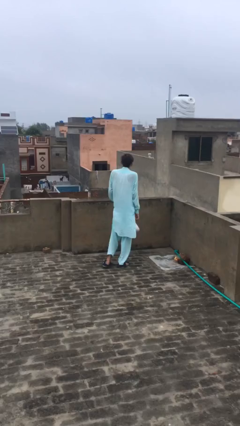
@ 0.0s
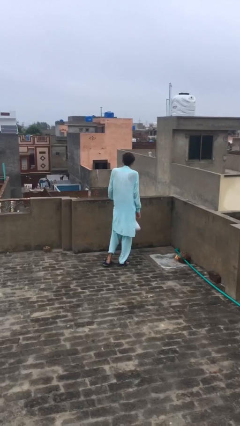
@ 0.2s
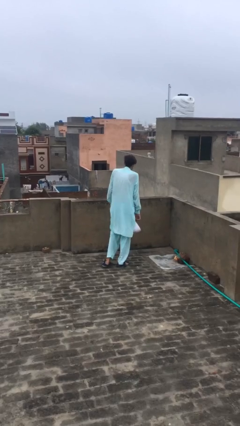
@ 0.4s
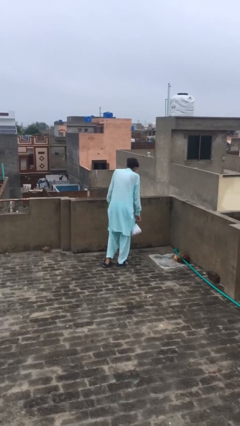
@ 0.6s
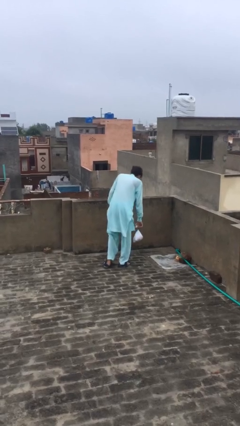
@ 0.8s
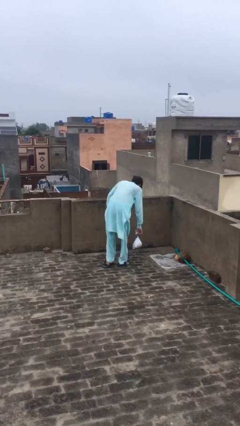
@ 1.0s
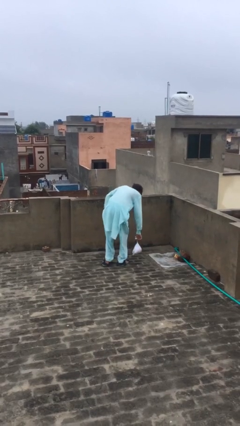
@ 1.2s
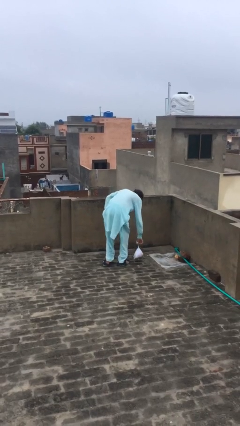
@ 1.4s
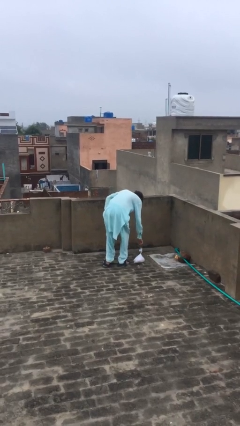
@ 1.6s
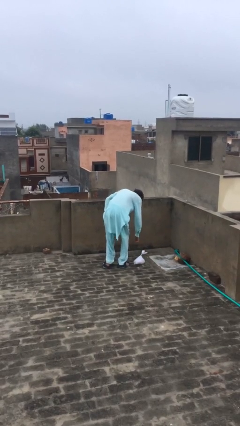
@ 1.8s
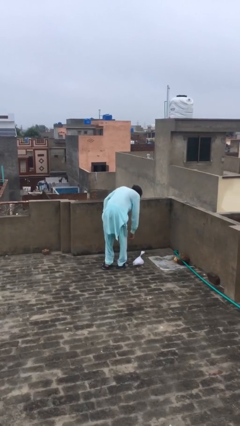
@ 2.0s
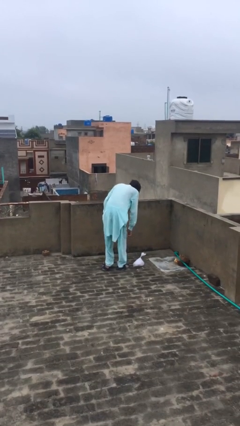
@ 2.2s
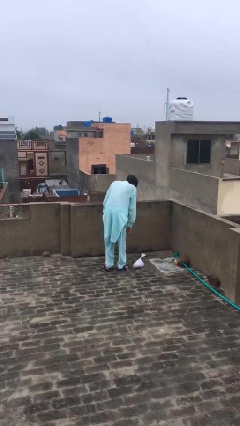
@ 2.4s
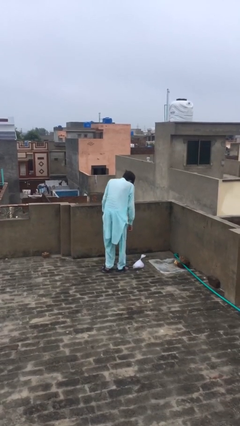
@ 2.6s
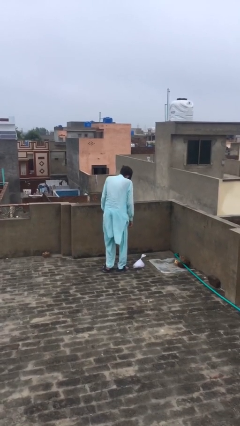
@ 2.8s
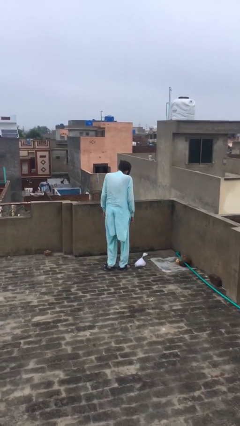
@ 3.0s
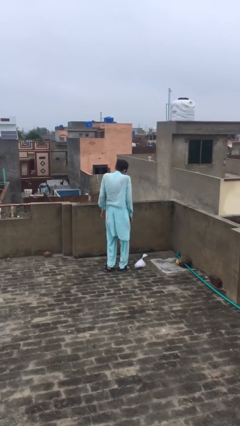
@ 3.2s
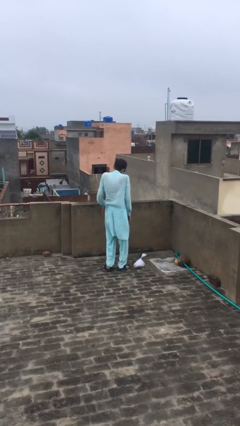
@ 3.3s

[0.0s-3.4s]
person puts down object on floor

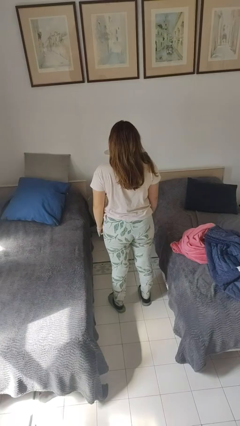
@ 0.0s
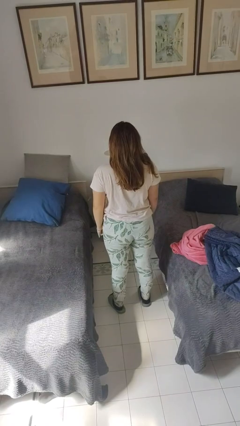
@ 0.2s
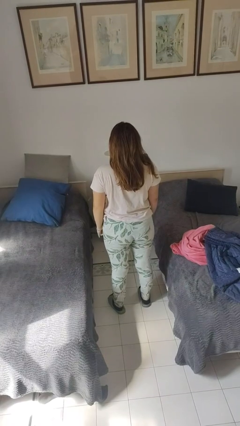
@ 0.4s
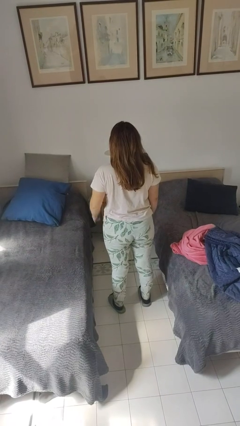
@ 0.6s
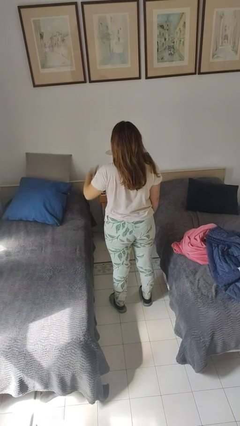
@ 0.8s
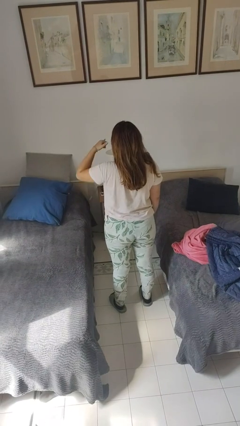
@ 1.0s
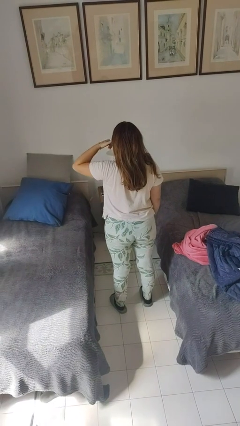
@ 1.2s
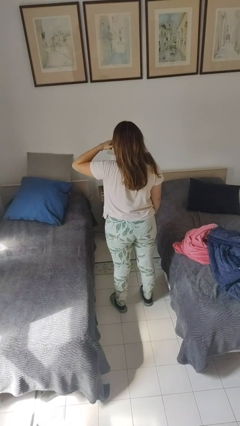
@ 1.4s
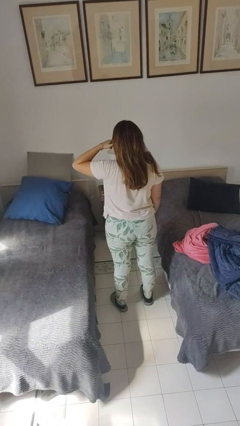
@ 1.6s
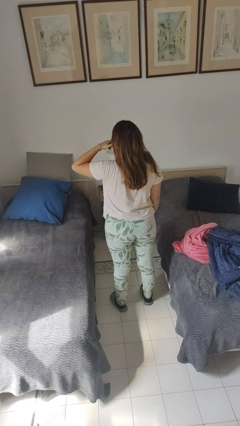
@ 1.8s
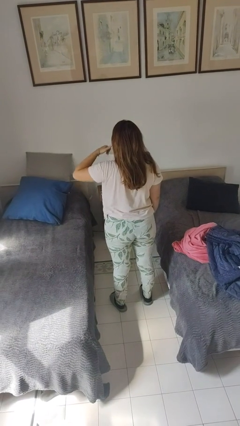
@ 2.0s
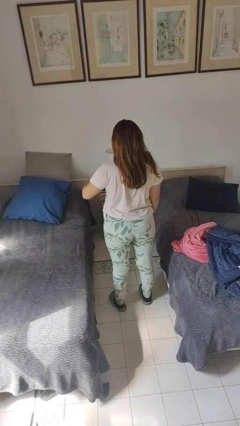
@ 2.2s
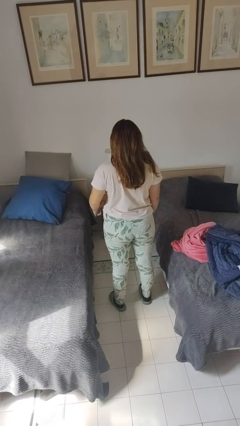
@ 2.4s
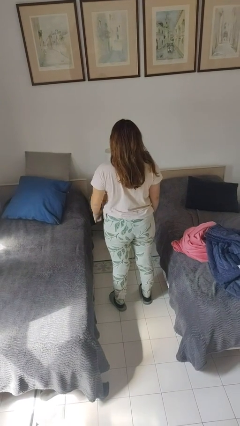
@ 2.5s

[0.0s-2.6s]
person gestures call me

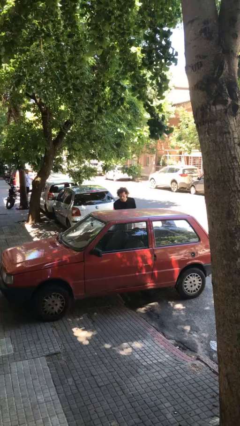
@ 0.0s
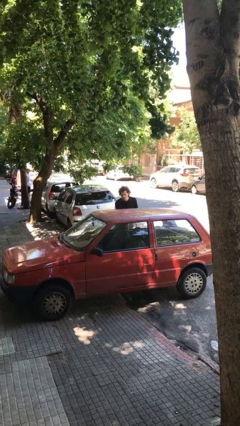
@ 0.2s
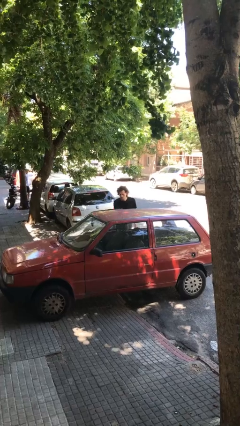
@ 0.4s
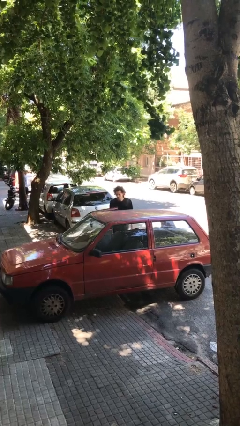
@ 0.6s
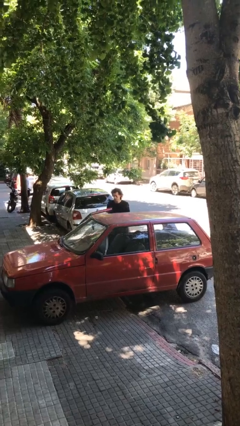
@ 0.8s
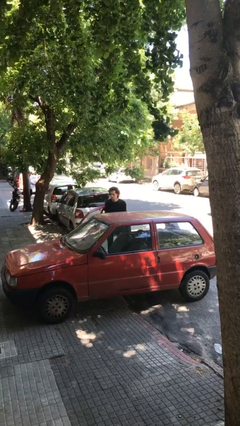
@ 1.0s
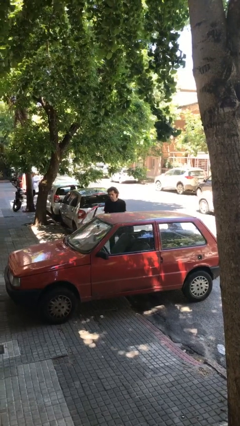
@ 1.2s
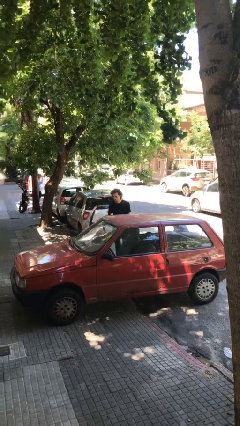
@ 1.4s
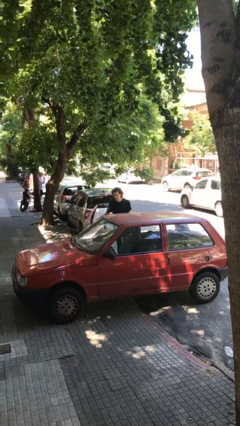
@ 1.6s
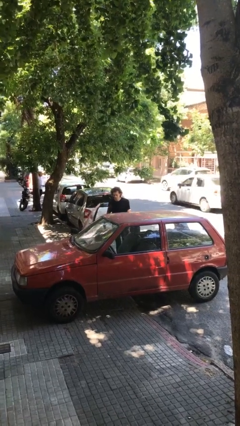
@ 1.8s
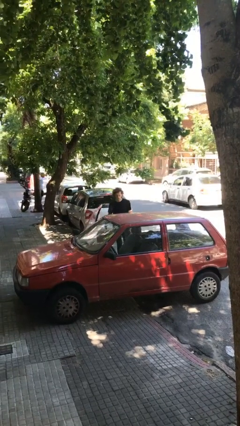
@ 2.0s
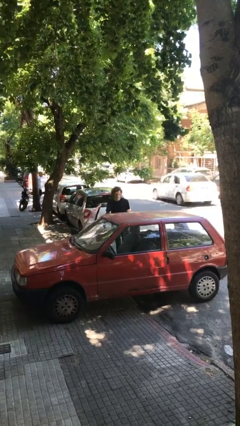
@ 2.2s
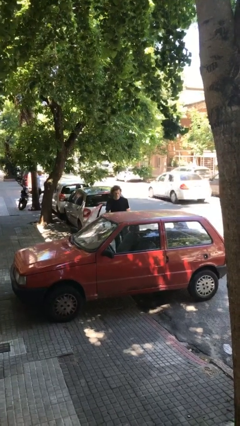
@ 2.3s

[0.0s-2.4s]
person opens car door

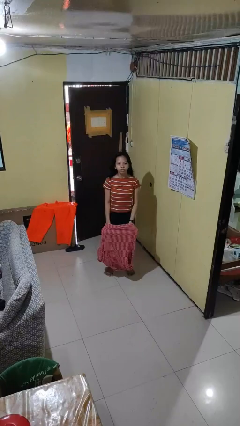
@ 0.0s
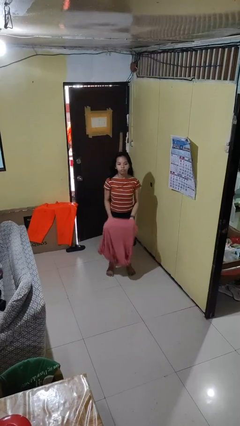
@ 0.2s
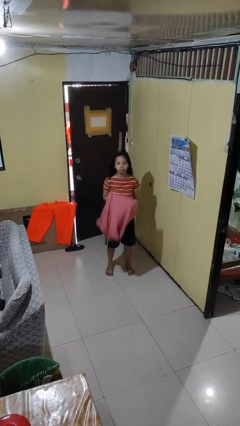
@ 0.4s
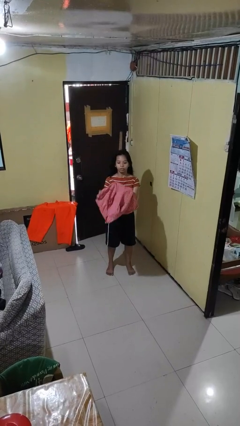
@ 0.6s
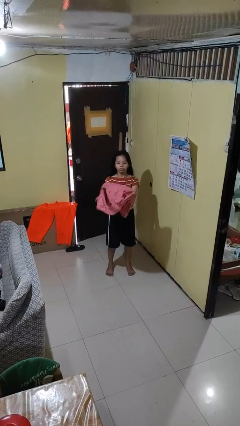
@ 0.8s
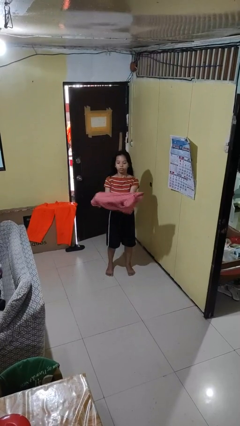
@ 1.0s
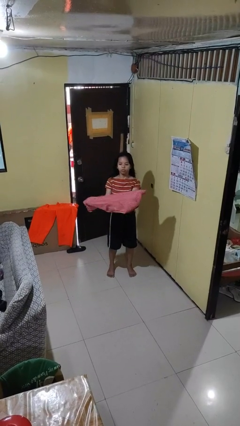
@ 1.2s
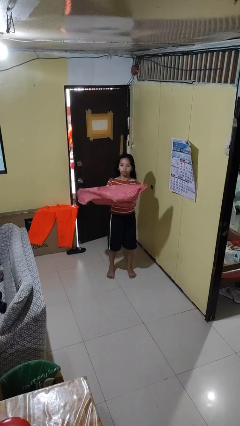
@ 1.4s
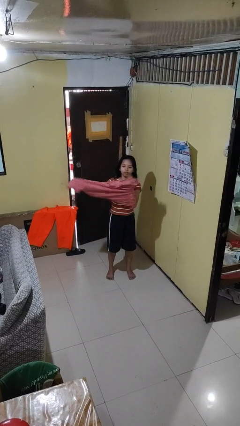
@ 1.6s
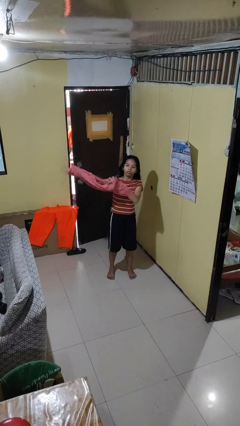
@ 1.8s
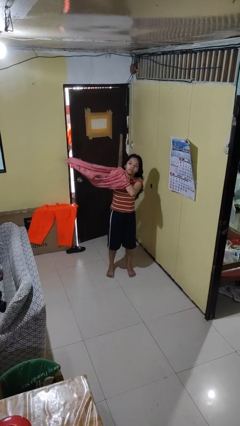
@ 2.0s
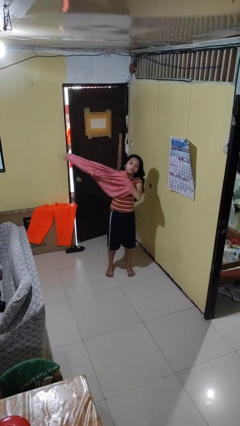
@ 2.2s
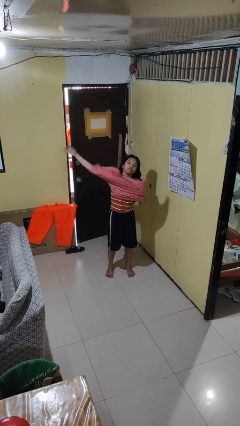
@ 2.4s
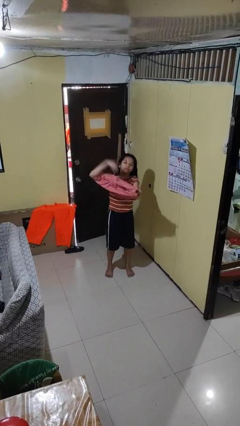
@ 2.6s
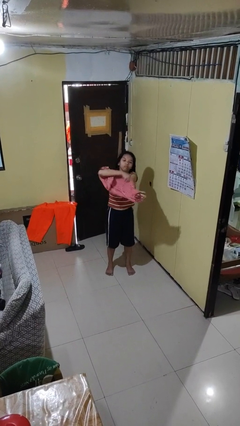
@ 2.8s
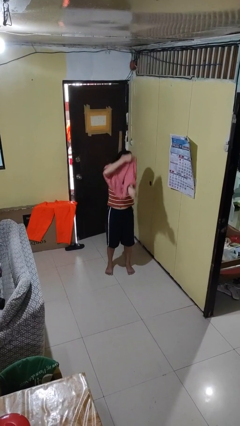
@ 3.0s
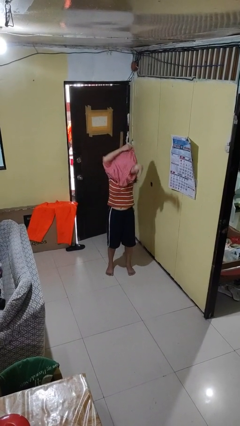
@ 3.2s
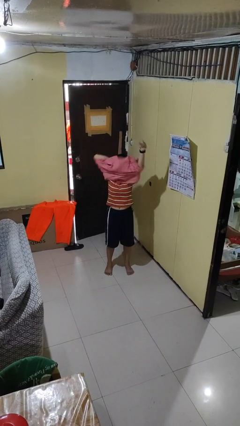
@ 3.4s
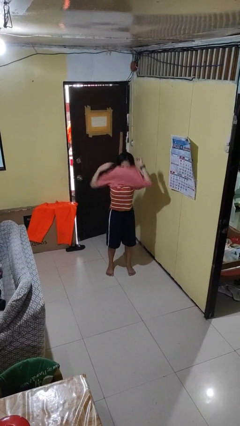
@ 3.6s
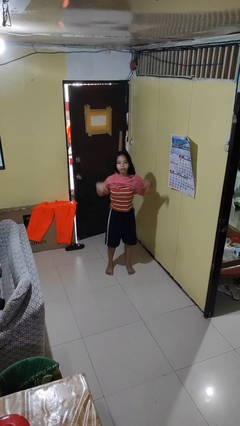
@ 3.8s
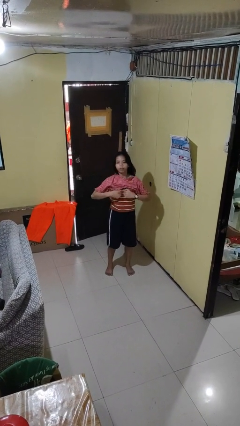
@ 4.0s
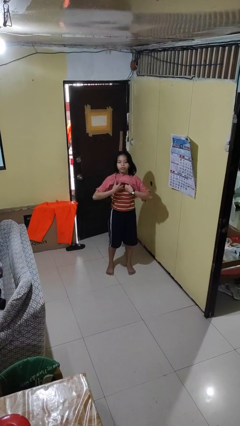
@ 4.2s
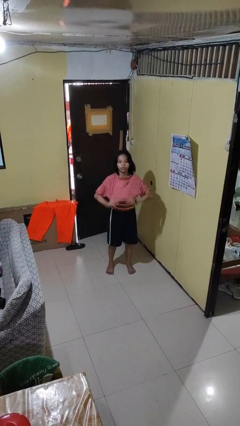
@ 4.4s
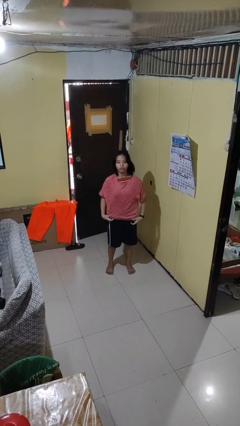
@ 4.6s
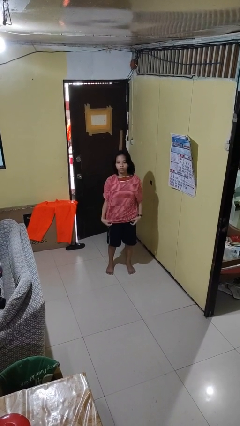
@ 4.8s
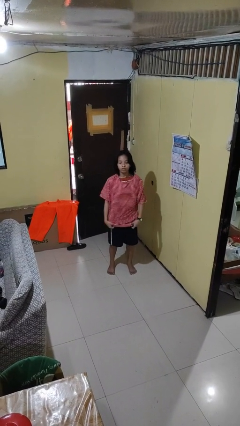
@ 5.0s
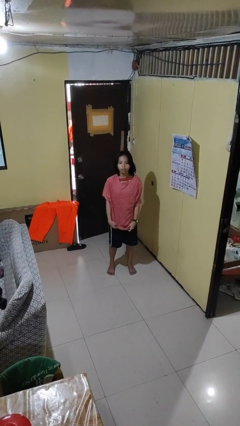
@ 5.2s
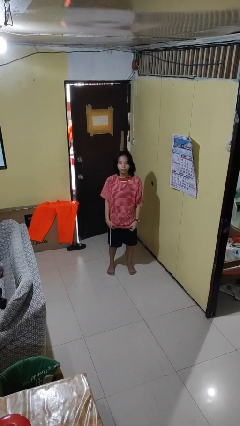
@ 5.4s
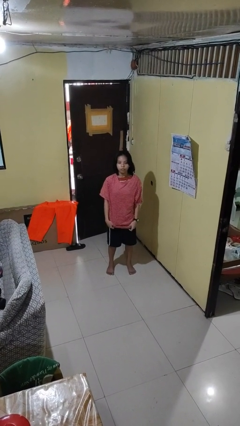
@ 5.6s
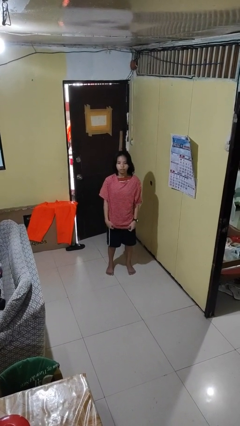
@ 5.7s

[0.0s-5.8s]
person puts on shirt

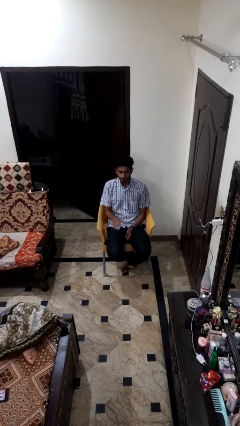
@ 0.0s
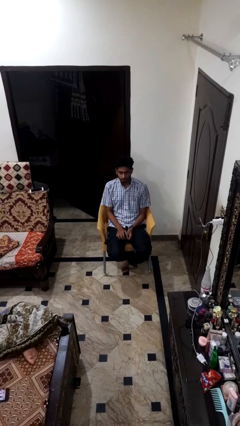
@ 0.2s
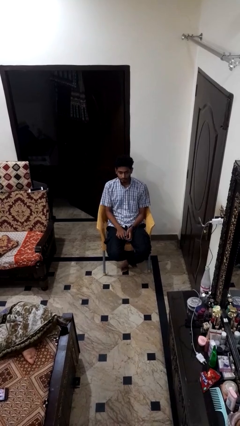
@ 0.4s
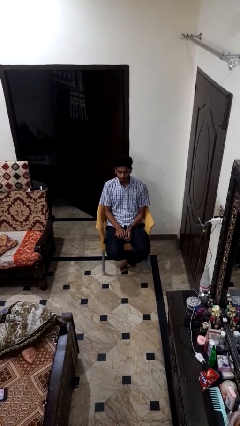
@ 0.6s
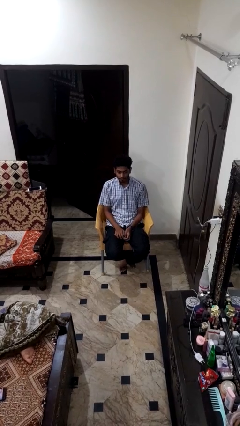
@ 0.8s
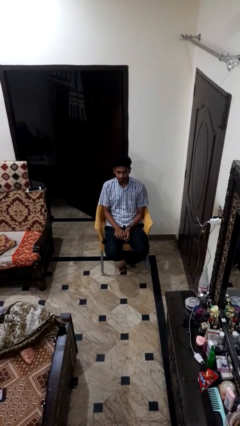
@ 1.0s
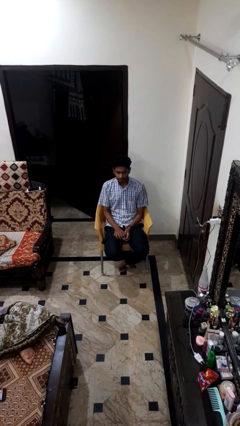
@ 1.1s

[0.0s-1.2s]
person gestures lower hand

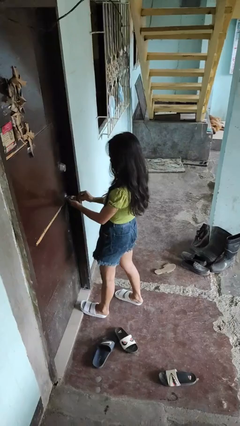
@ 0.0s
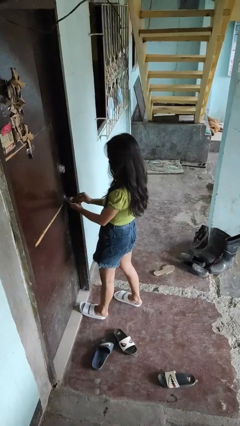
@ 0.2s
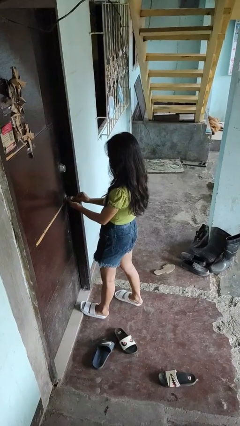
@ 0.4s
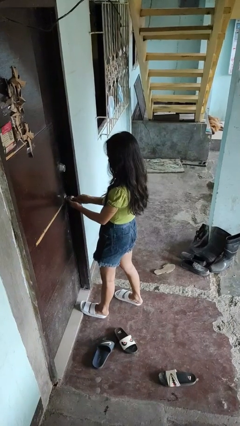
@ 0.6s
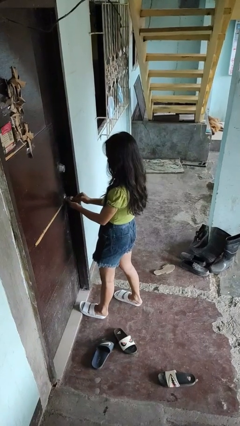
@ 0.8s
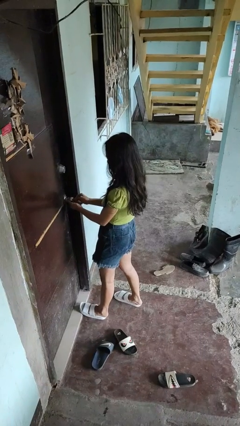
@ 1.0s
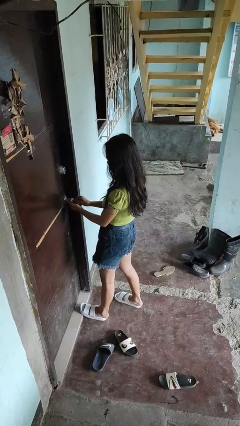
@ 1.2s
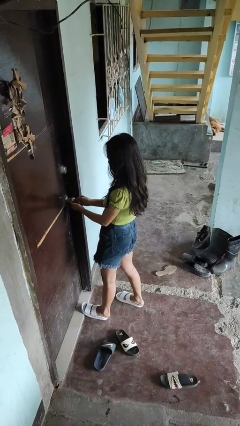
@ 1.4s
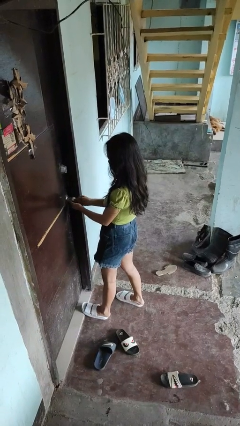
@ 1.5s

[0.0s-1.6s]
person locks door with keys
